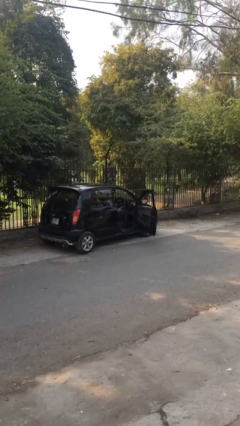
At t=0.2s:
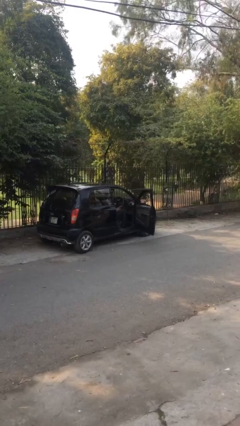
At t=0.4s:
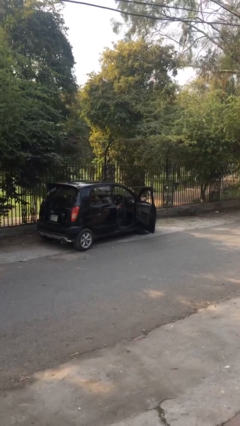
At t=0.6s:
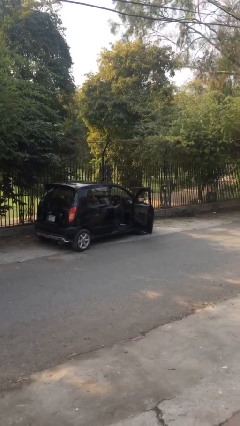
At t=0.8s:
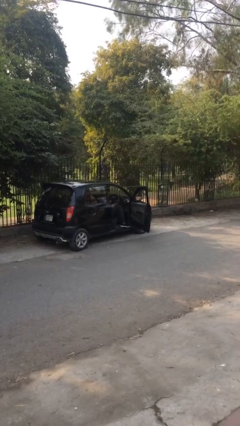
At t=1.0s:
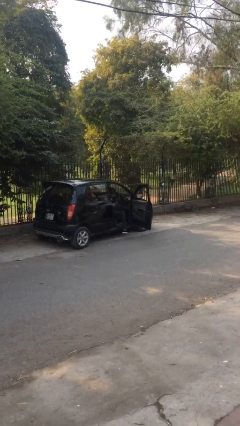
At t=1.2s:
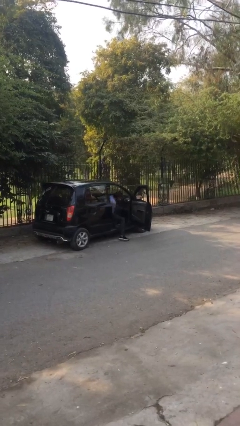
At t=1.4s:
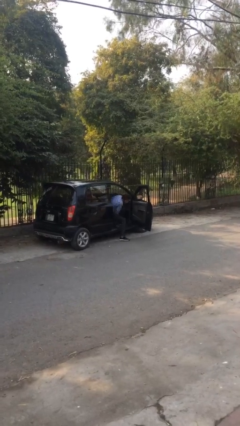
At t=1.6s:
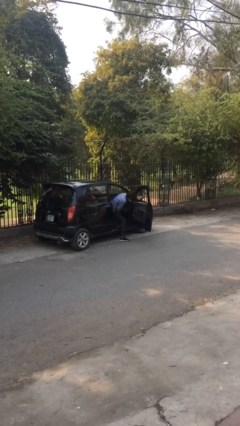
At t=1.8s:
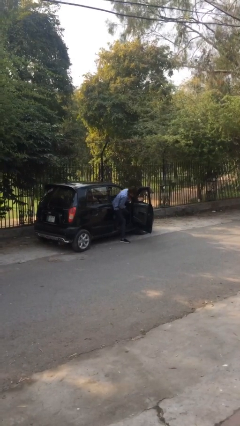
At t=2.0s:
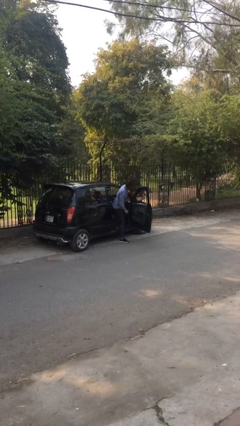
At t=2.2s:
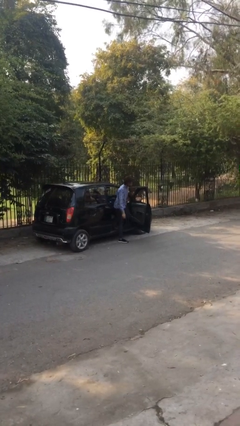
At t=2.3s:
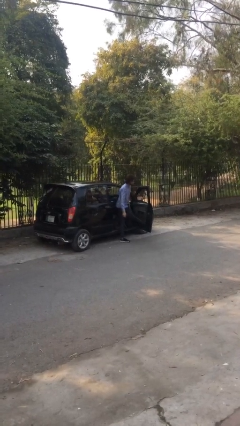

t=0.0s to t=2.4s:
person exits car

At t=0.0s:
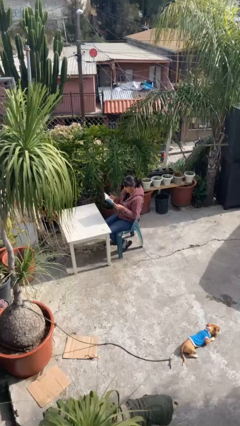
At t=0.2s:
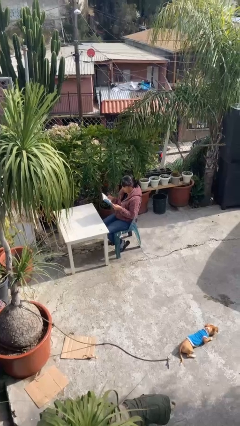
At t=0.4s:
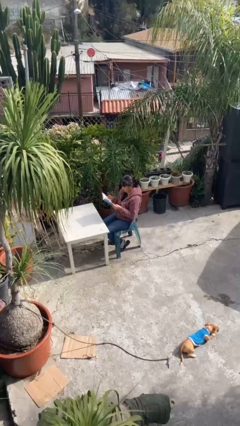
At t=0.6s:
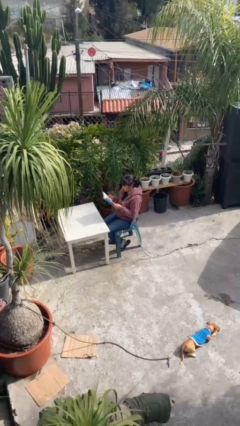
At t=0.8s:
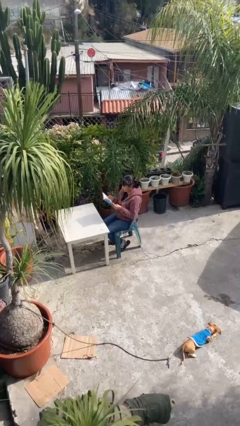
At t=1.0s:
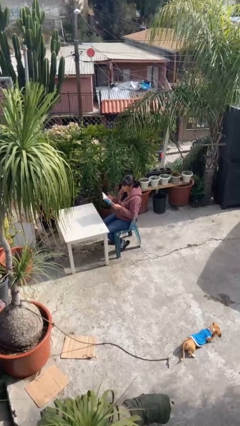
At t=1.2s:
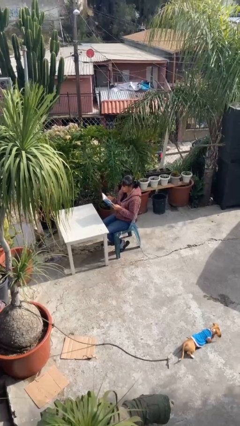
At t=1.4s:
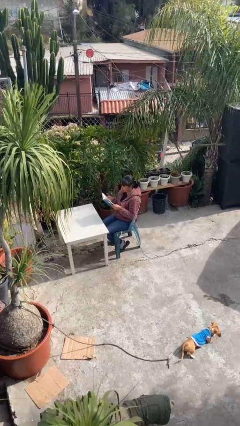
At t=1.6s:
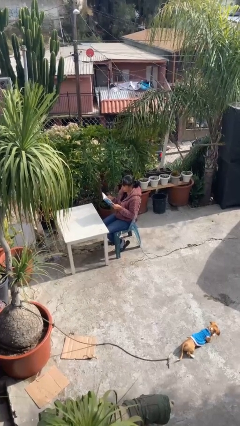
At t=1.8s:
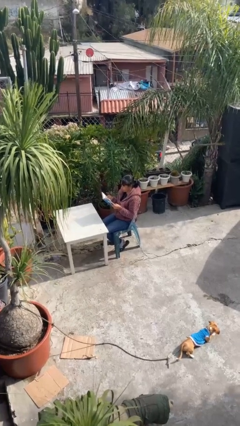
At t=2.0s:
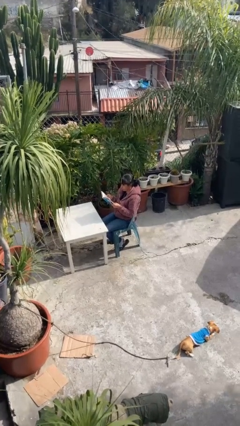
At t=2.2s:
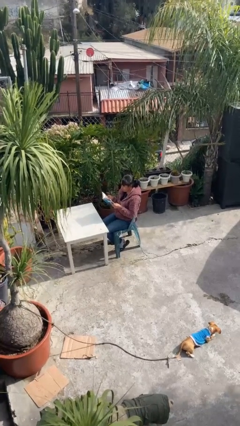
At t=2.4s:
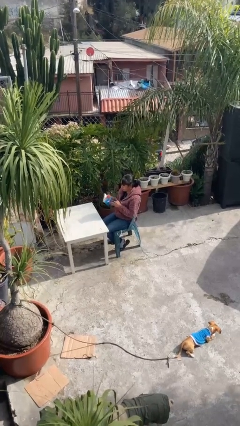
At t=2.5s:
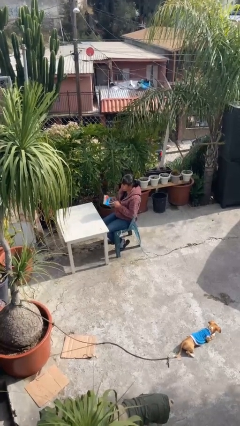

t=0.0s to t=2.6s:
person reads document

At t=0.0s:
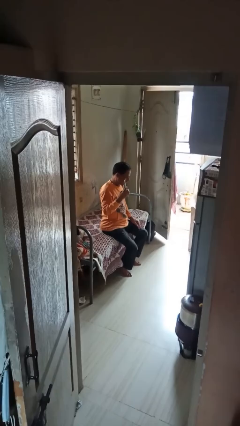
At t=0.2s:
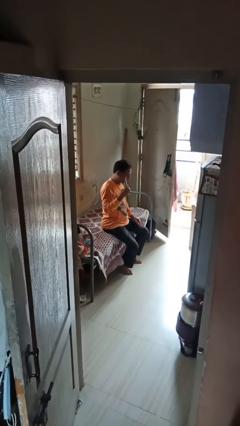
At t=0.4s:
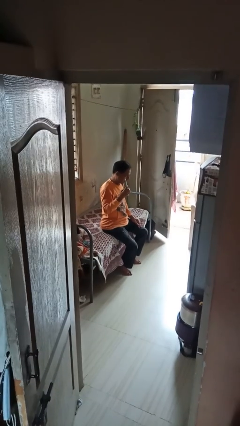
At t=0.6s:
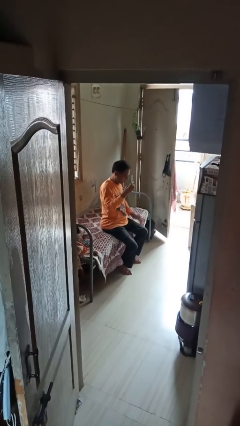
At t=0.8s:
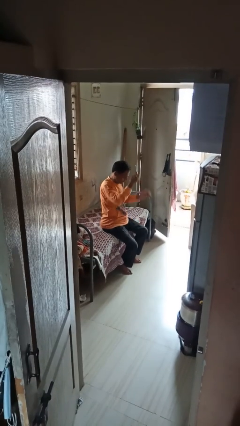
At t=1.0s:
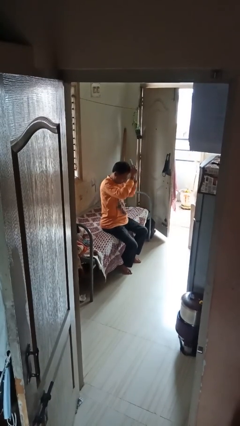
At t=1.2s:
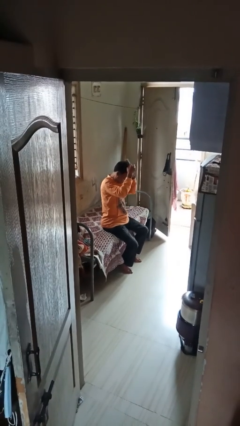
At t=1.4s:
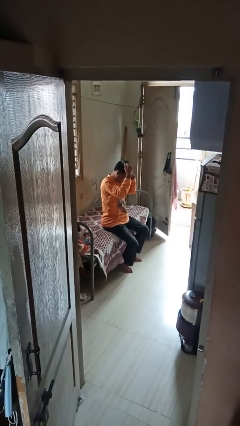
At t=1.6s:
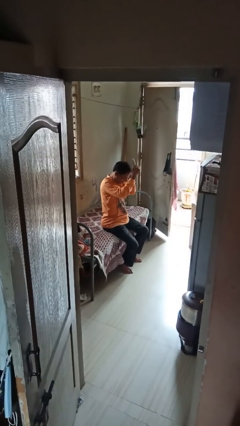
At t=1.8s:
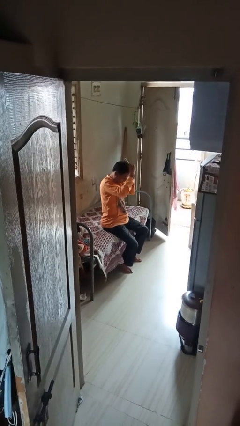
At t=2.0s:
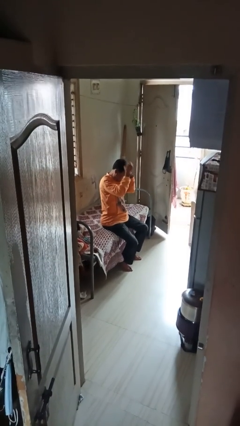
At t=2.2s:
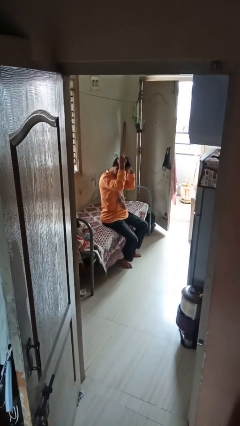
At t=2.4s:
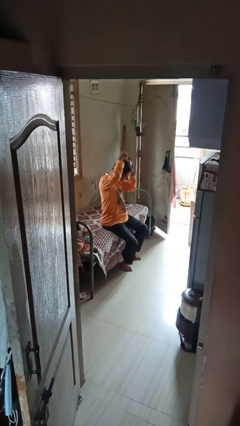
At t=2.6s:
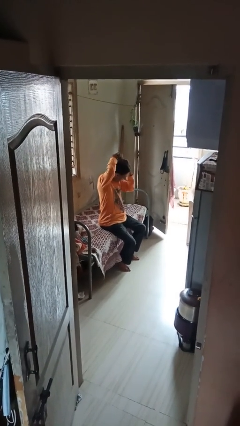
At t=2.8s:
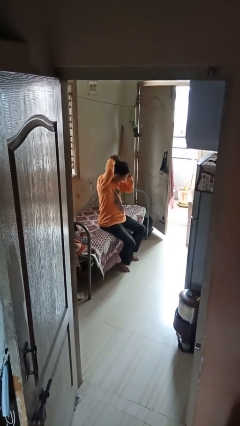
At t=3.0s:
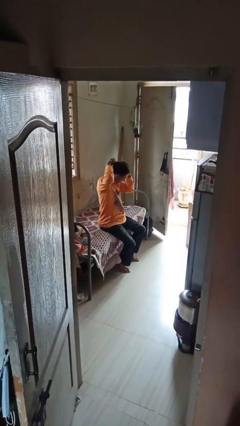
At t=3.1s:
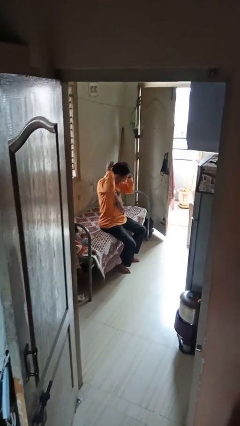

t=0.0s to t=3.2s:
person brushes hair

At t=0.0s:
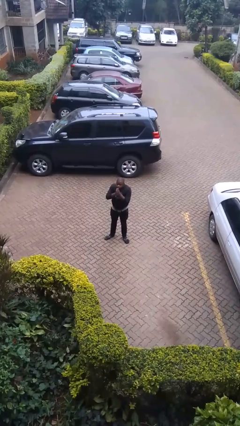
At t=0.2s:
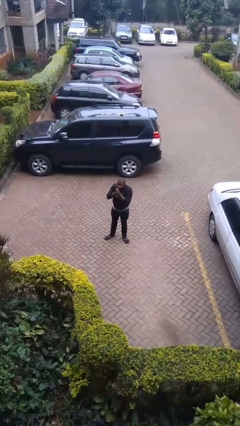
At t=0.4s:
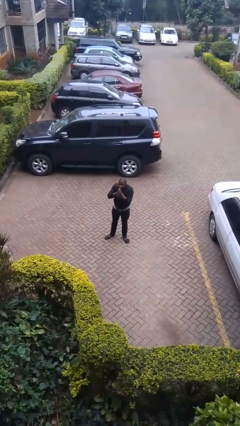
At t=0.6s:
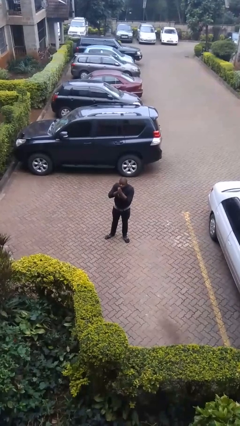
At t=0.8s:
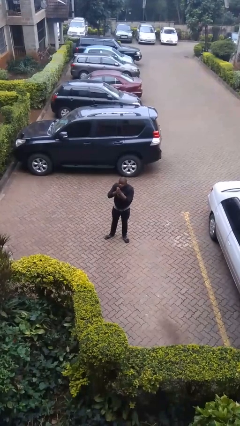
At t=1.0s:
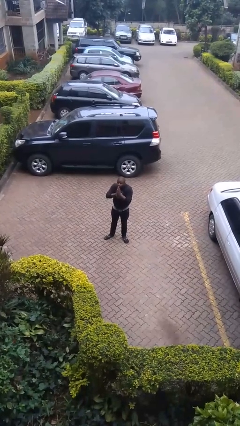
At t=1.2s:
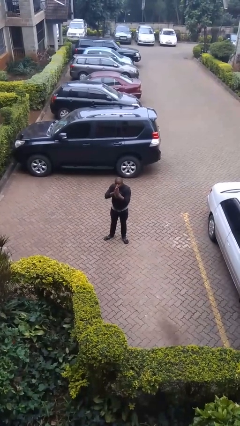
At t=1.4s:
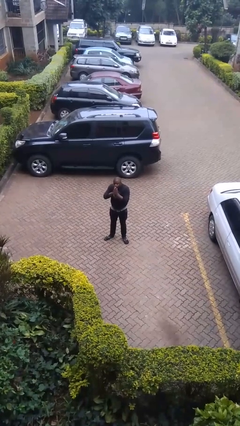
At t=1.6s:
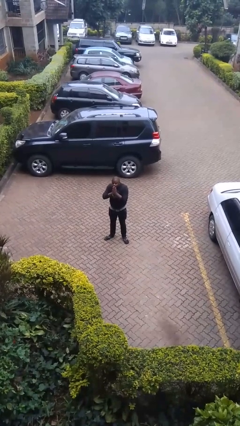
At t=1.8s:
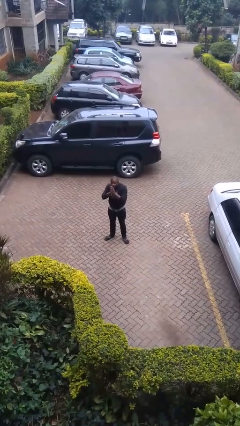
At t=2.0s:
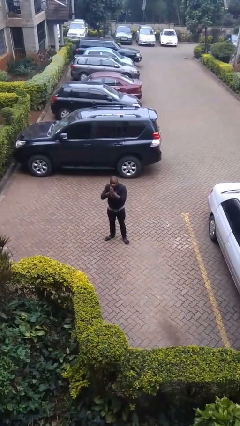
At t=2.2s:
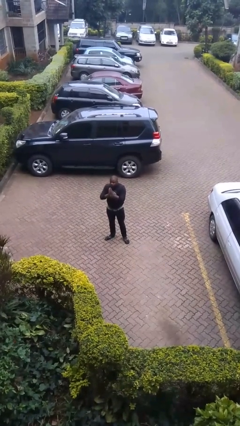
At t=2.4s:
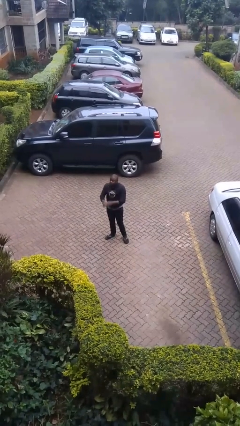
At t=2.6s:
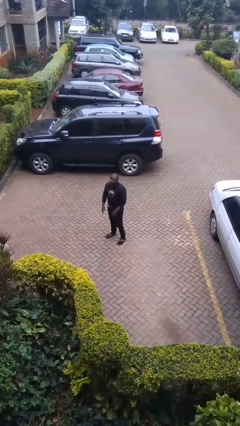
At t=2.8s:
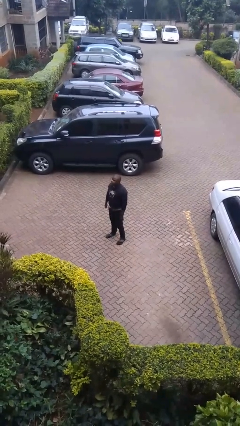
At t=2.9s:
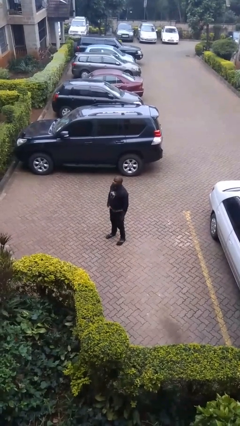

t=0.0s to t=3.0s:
person blows into hands

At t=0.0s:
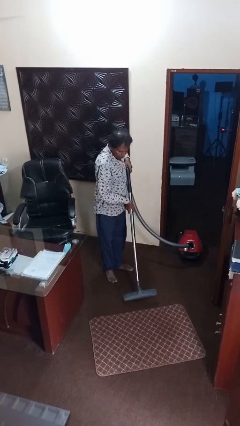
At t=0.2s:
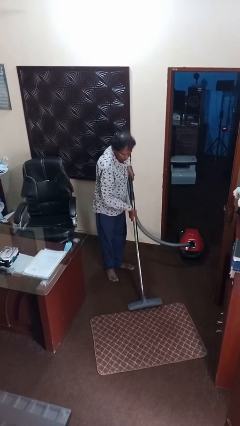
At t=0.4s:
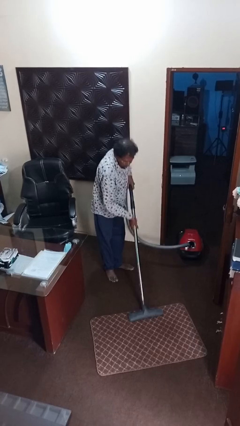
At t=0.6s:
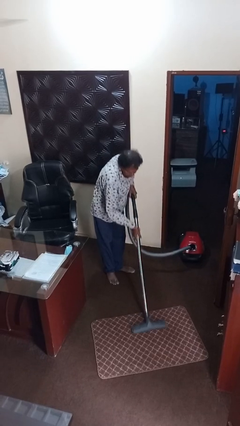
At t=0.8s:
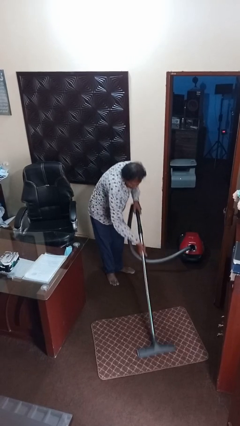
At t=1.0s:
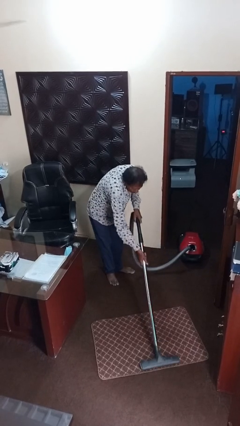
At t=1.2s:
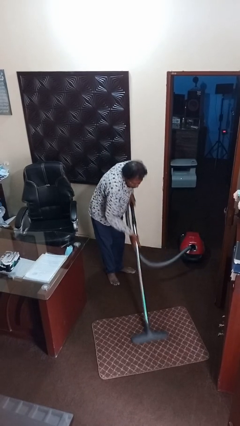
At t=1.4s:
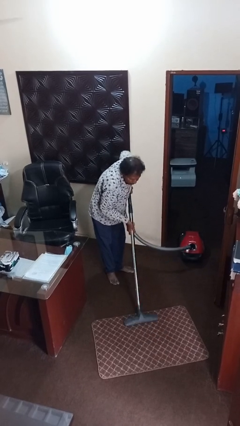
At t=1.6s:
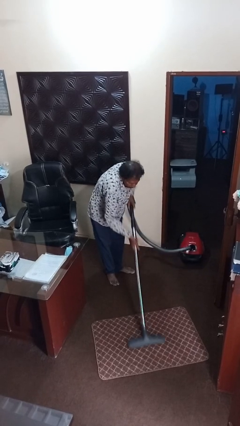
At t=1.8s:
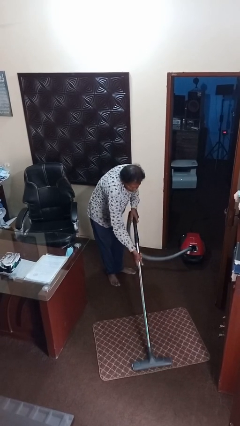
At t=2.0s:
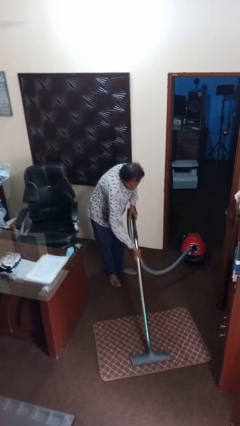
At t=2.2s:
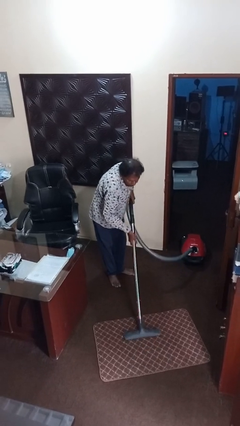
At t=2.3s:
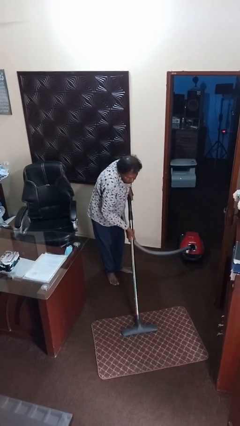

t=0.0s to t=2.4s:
person vacuums carpet

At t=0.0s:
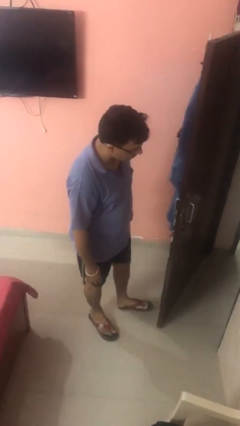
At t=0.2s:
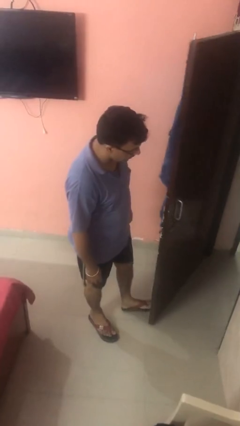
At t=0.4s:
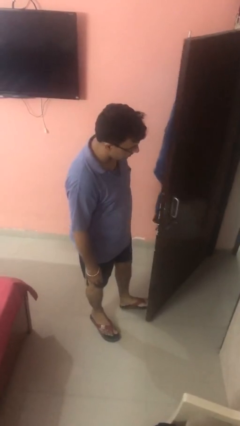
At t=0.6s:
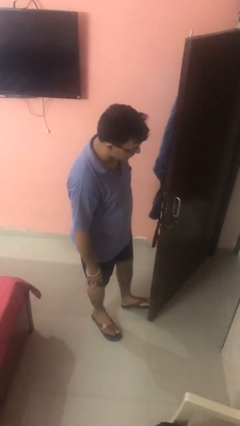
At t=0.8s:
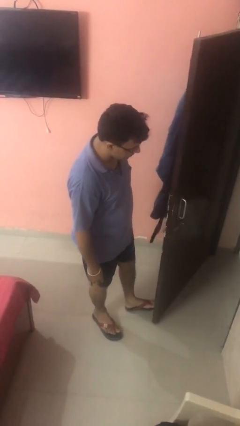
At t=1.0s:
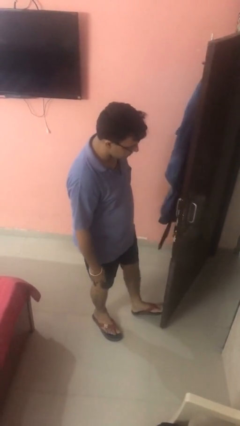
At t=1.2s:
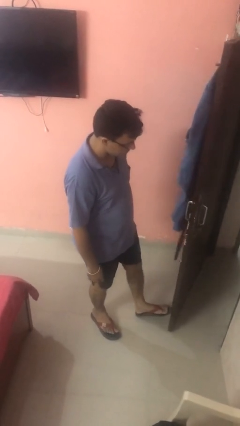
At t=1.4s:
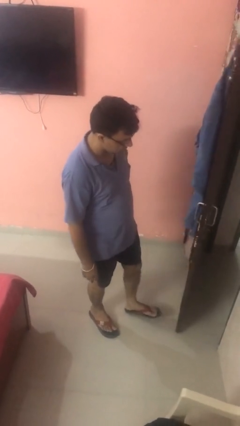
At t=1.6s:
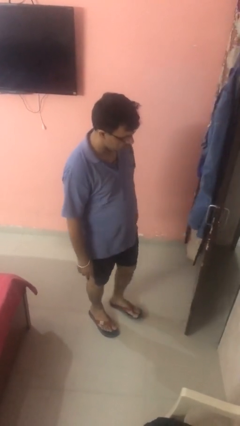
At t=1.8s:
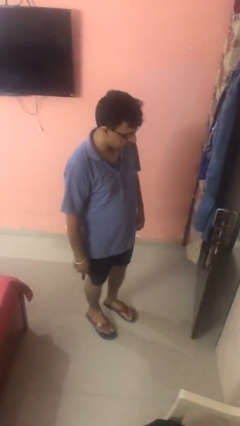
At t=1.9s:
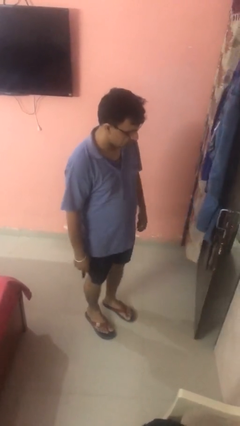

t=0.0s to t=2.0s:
person closes door with foot

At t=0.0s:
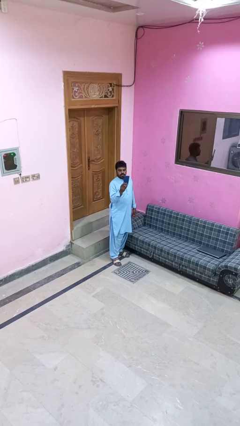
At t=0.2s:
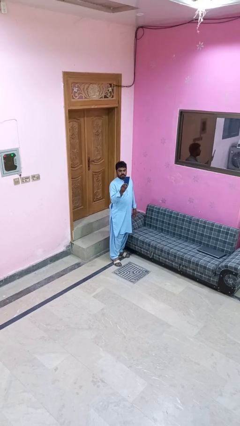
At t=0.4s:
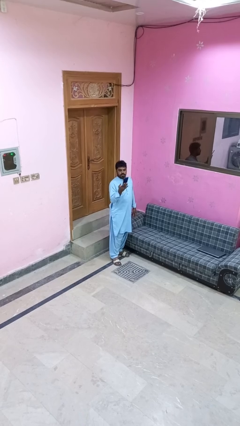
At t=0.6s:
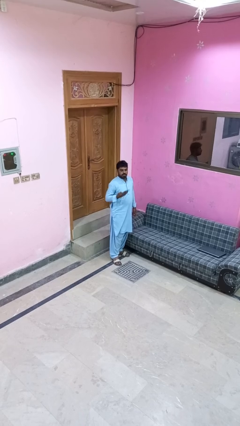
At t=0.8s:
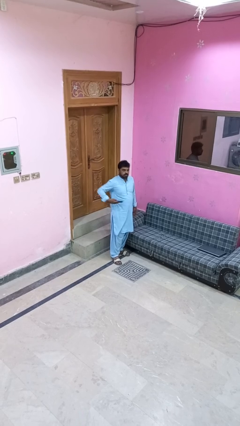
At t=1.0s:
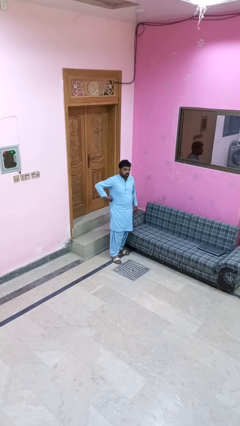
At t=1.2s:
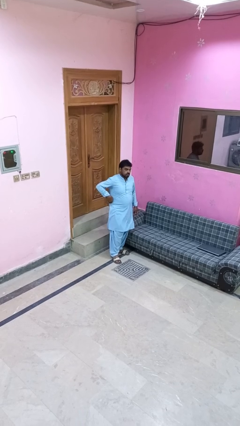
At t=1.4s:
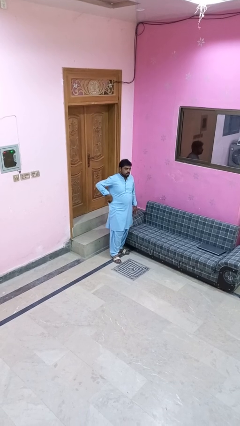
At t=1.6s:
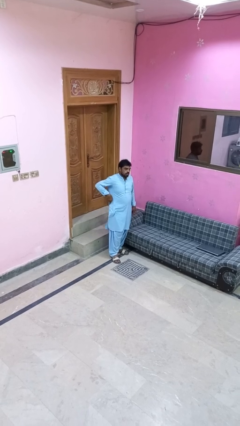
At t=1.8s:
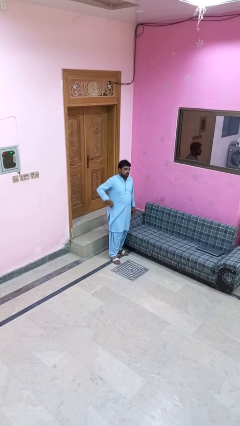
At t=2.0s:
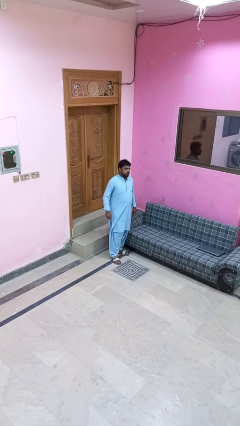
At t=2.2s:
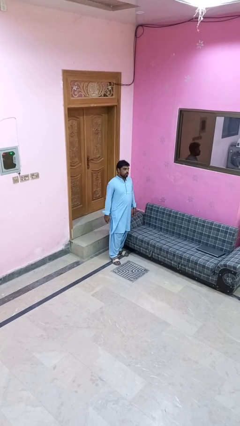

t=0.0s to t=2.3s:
person puts phone into pocket
